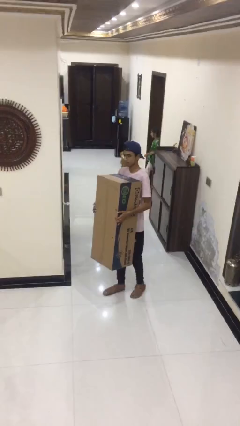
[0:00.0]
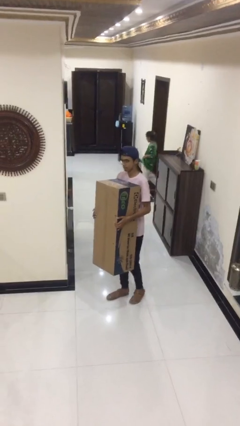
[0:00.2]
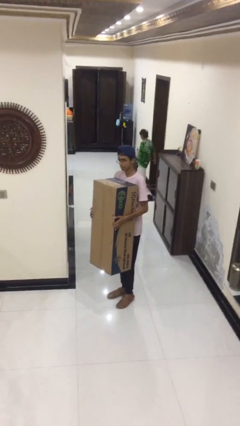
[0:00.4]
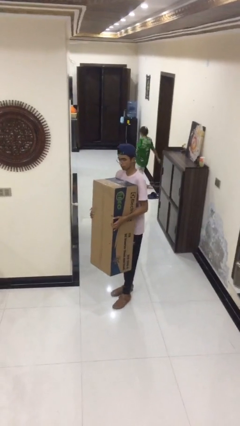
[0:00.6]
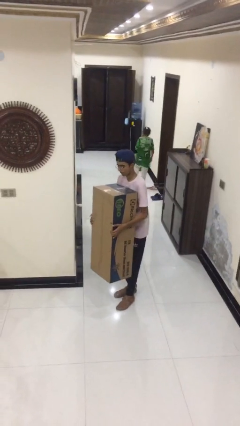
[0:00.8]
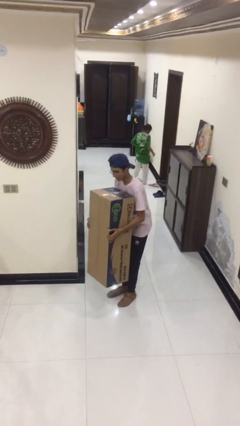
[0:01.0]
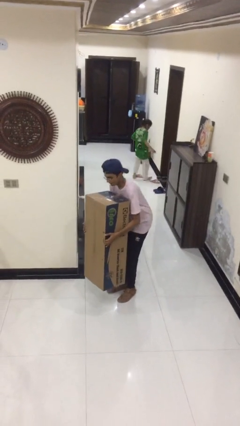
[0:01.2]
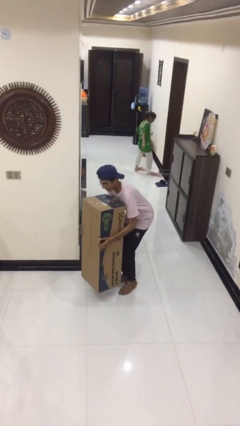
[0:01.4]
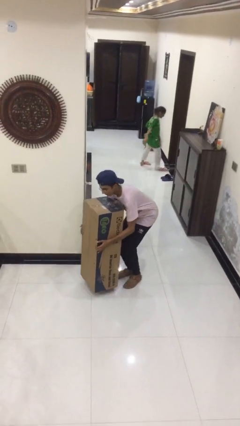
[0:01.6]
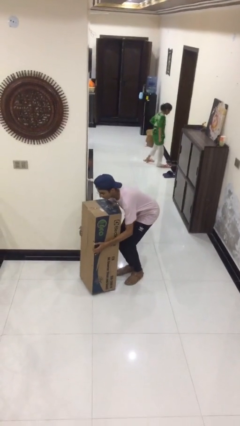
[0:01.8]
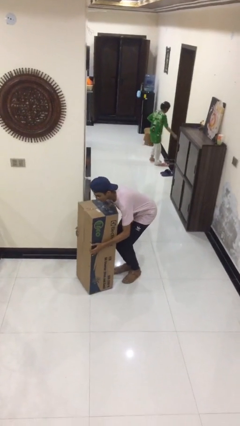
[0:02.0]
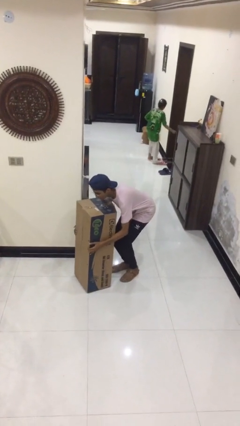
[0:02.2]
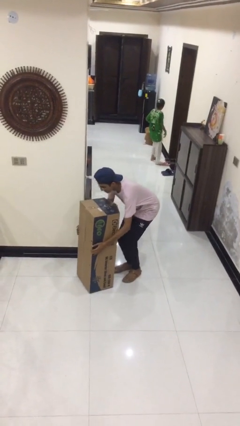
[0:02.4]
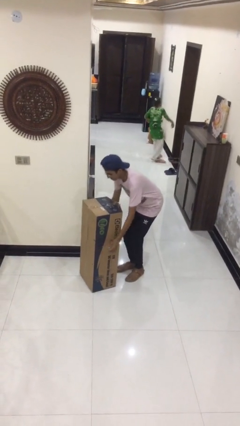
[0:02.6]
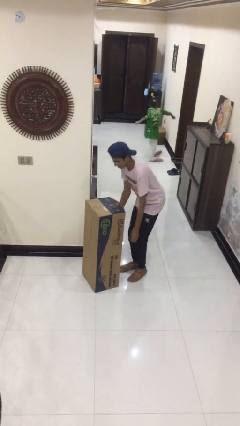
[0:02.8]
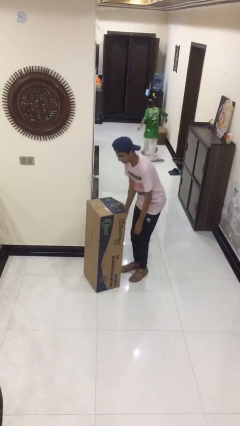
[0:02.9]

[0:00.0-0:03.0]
person puts down object on floor

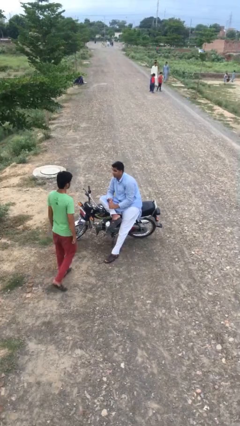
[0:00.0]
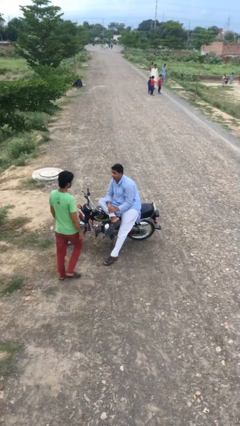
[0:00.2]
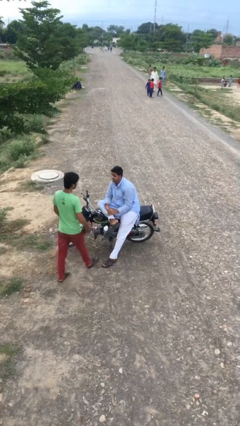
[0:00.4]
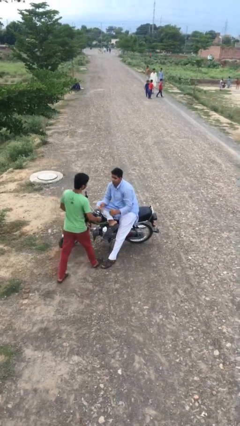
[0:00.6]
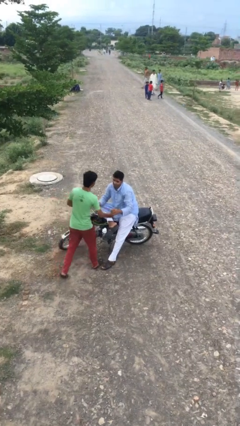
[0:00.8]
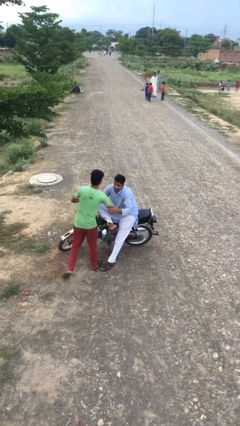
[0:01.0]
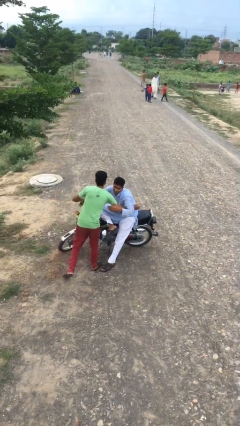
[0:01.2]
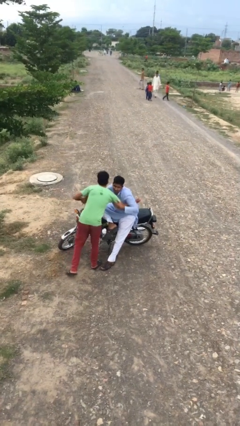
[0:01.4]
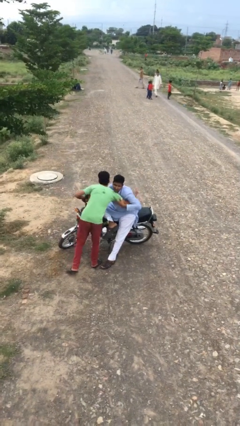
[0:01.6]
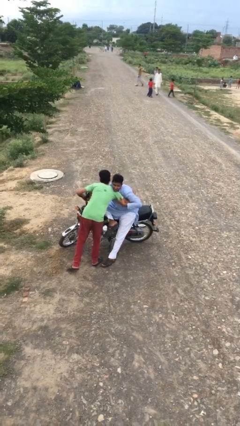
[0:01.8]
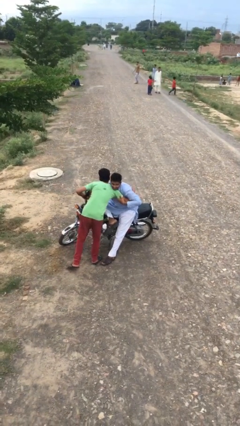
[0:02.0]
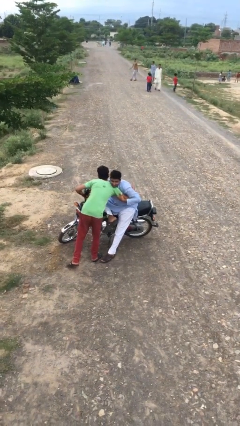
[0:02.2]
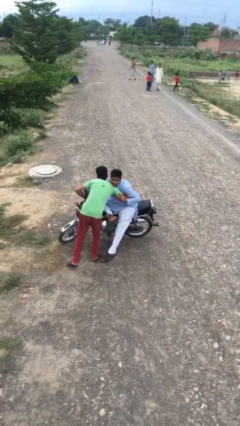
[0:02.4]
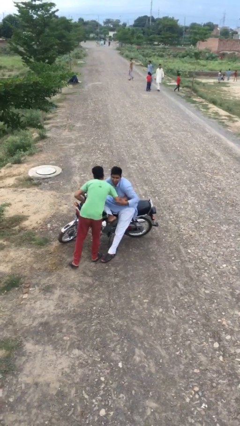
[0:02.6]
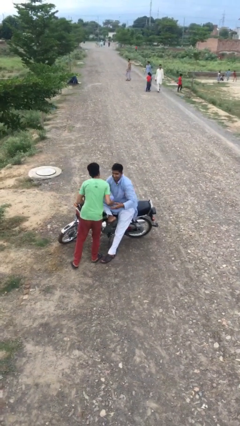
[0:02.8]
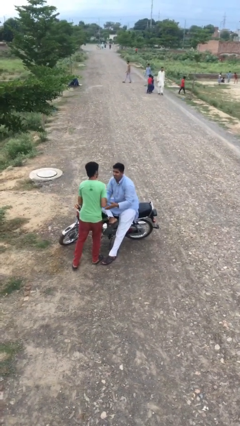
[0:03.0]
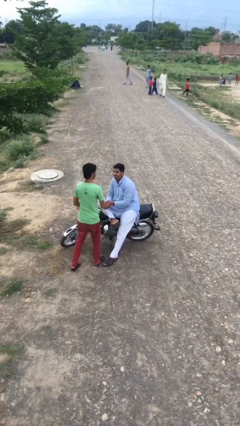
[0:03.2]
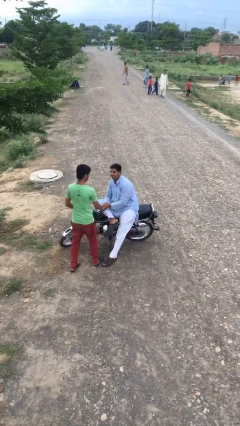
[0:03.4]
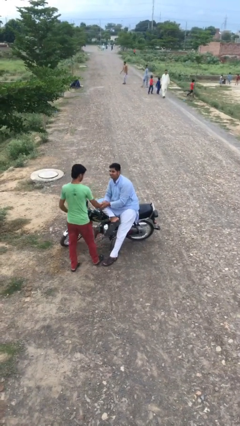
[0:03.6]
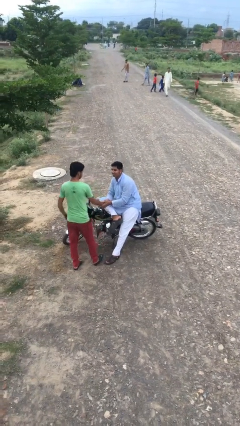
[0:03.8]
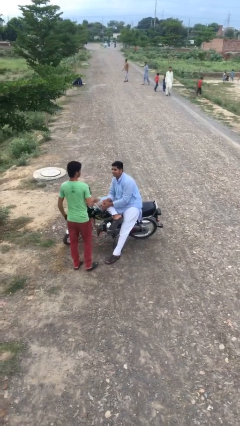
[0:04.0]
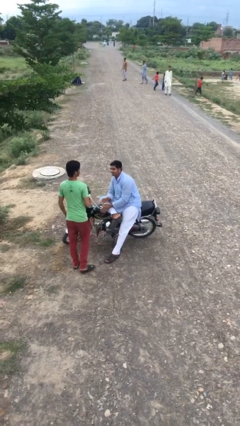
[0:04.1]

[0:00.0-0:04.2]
person embraces person

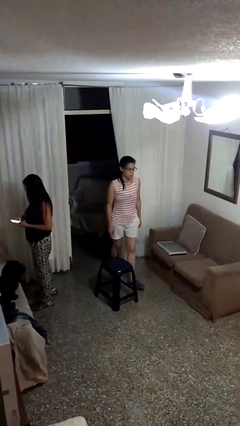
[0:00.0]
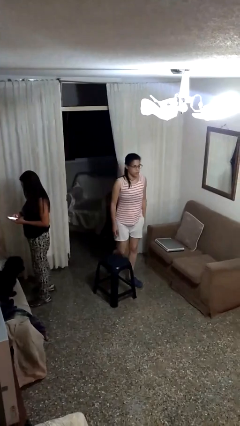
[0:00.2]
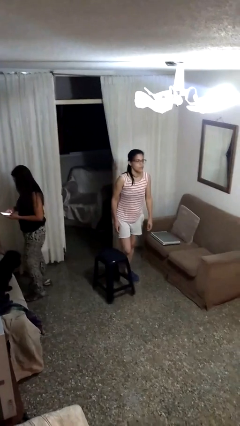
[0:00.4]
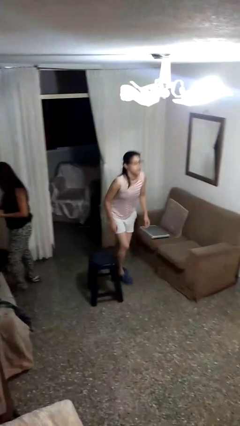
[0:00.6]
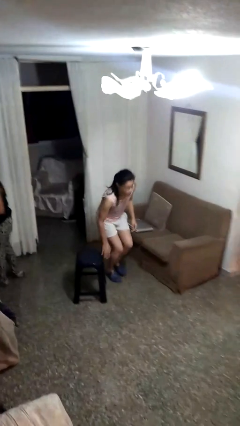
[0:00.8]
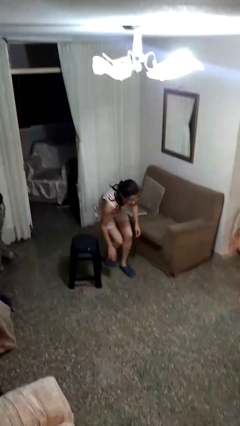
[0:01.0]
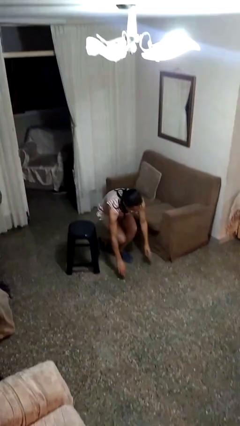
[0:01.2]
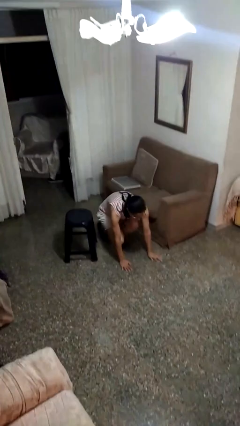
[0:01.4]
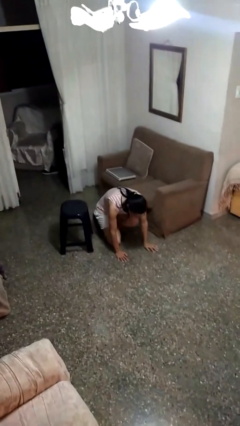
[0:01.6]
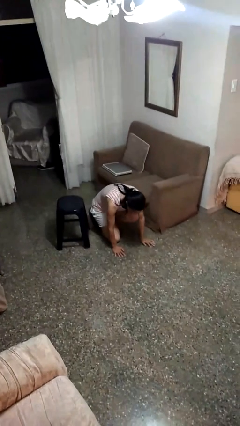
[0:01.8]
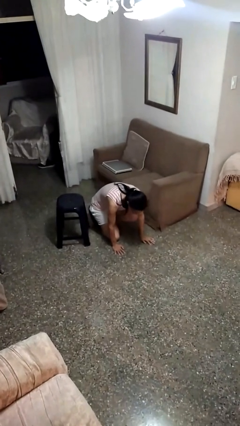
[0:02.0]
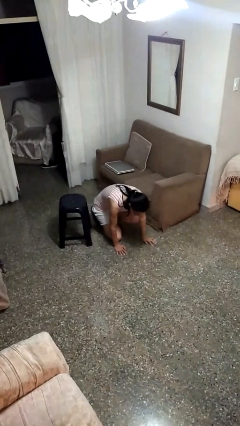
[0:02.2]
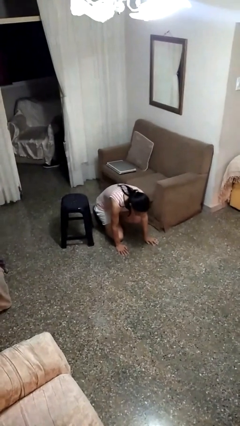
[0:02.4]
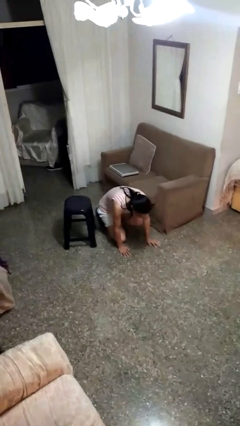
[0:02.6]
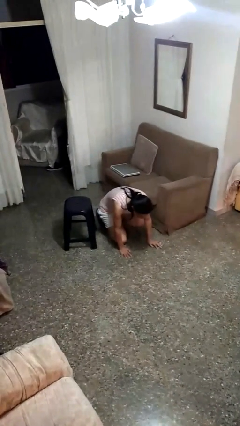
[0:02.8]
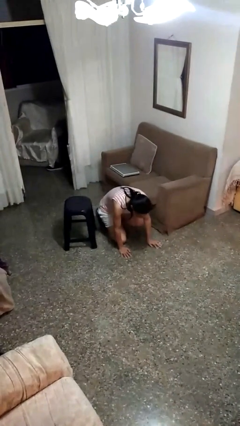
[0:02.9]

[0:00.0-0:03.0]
person trips on object on floor

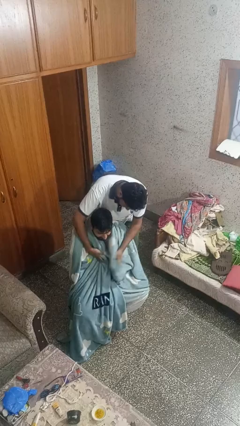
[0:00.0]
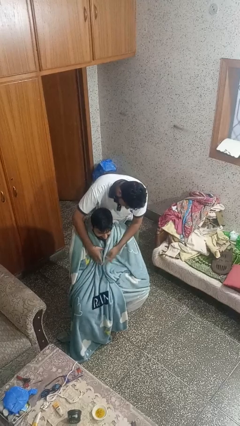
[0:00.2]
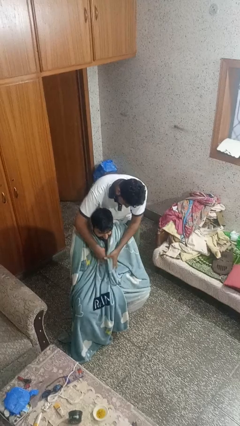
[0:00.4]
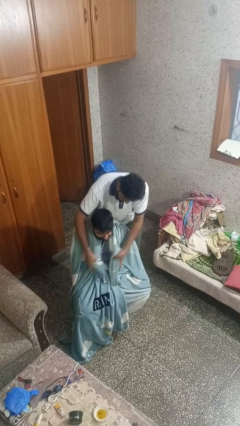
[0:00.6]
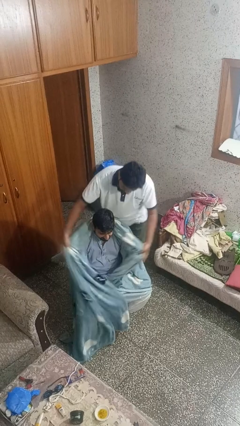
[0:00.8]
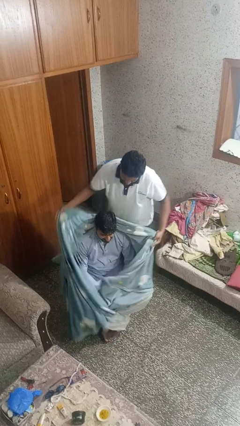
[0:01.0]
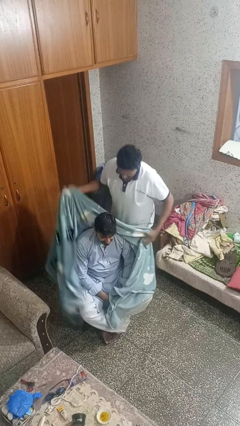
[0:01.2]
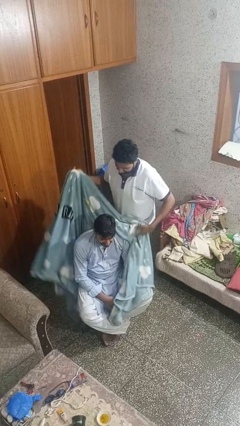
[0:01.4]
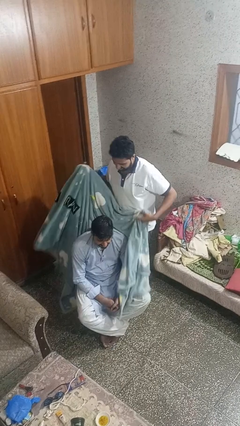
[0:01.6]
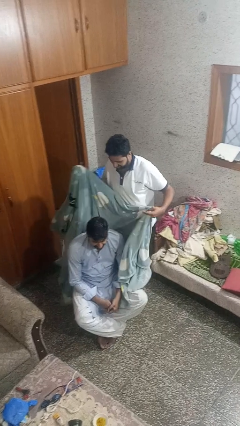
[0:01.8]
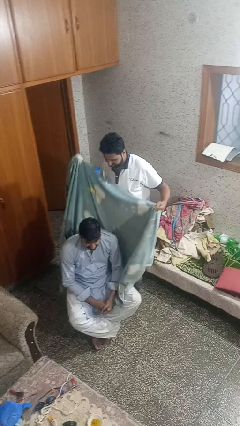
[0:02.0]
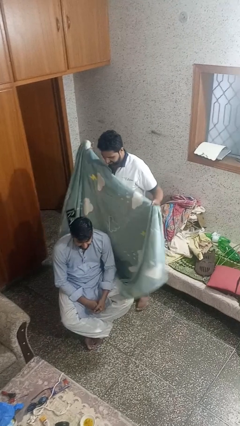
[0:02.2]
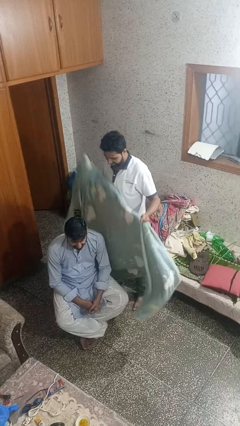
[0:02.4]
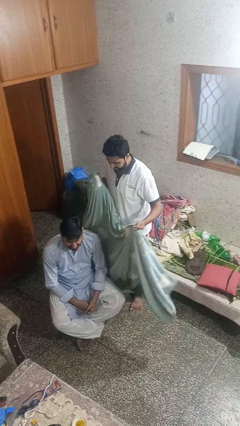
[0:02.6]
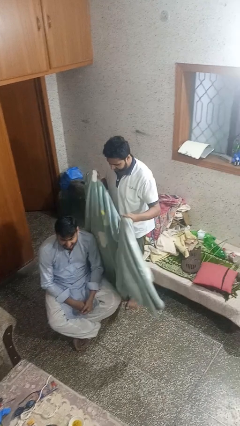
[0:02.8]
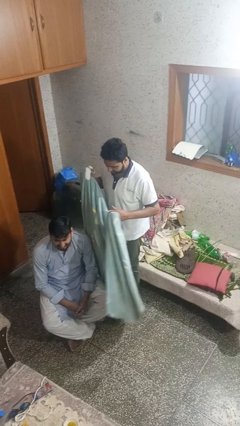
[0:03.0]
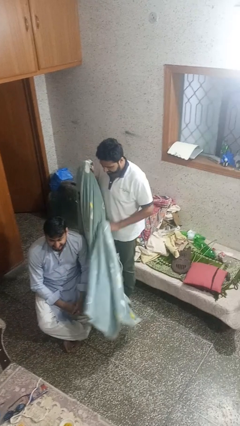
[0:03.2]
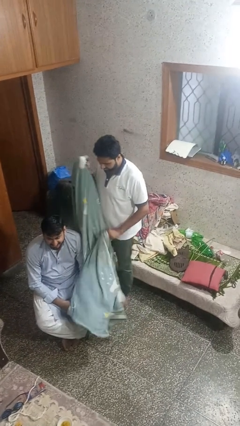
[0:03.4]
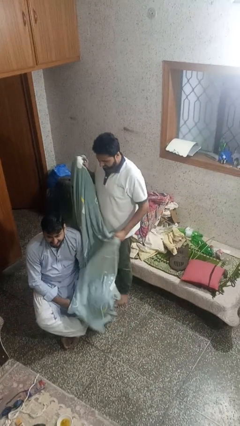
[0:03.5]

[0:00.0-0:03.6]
person uncovers friend with blanket

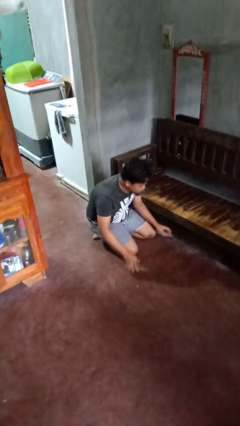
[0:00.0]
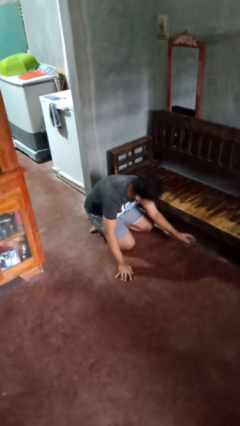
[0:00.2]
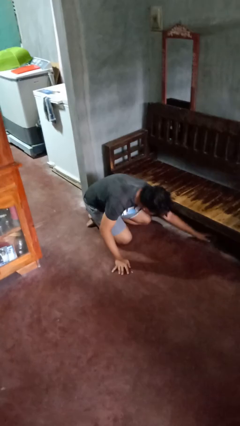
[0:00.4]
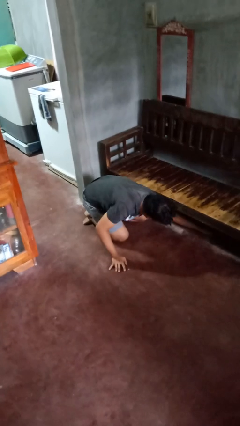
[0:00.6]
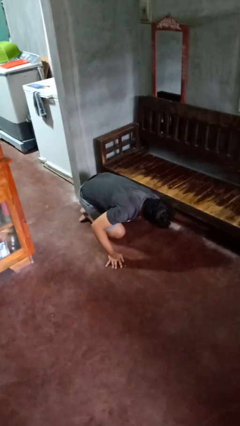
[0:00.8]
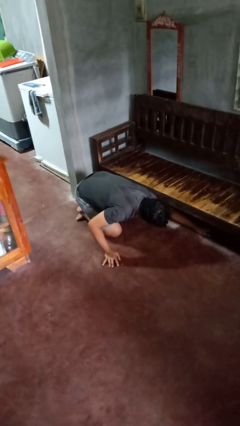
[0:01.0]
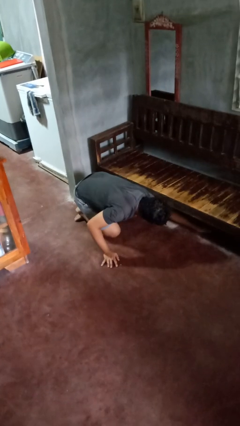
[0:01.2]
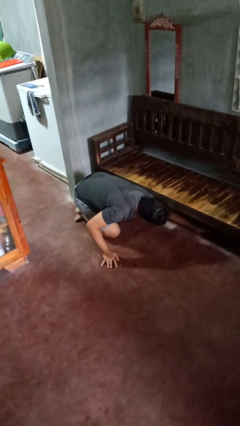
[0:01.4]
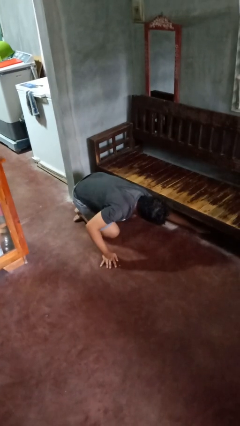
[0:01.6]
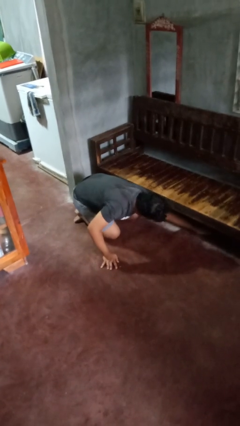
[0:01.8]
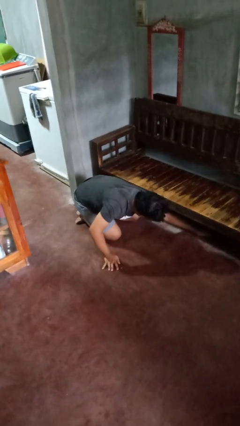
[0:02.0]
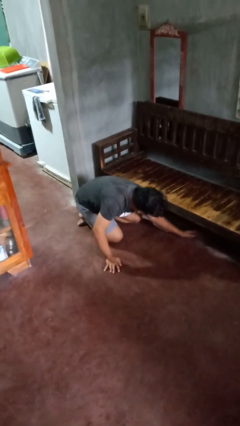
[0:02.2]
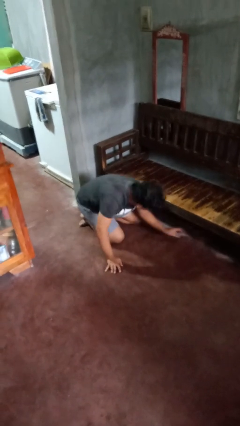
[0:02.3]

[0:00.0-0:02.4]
person searches under couch

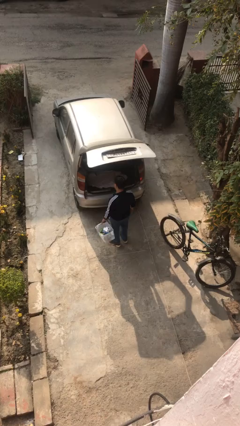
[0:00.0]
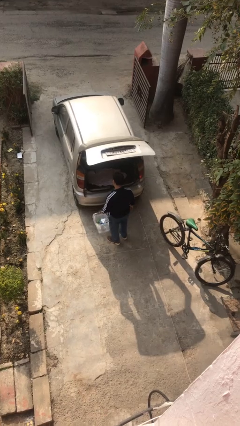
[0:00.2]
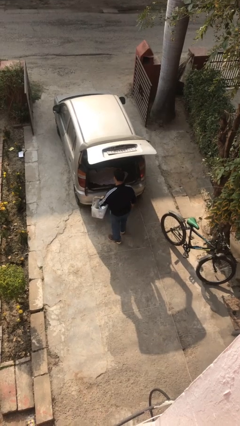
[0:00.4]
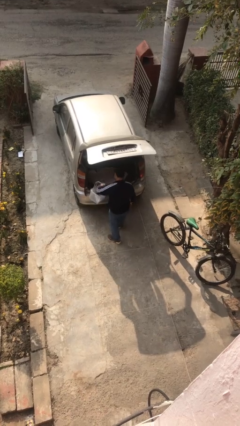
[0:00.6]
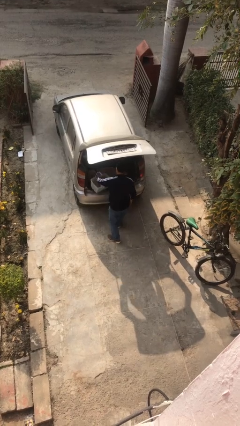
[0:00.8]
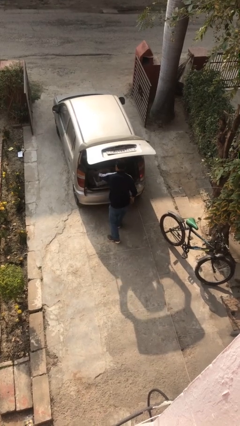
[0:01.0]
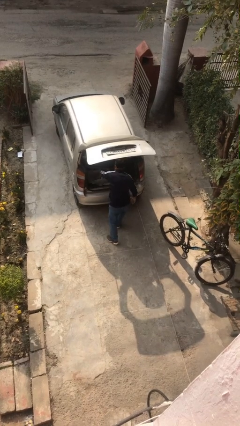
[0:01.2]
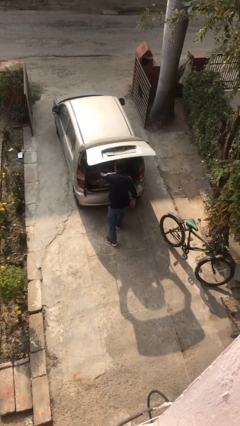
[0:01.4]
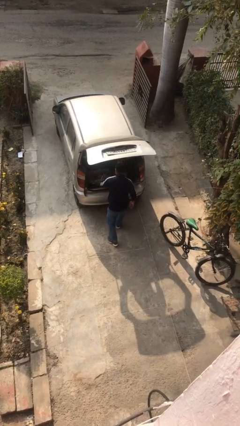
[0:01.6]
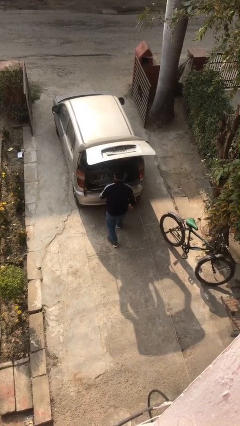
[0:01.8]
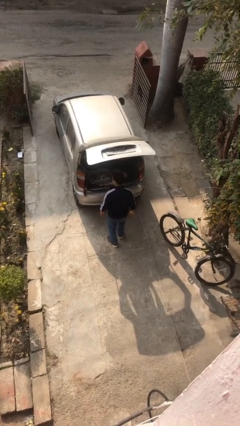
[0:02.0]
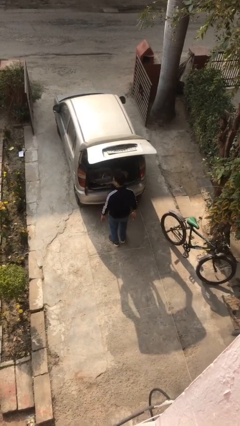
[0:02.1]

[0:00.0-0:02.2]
person loads car
